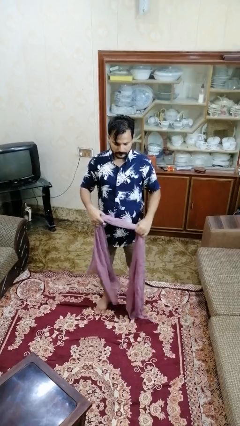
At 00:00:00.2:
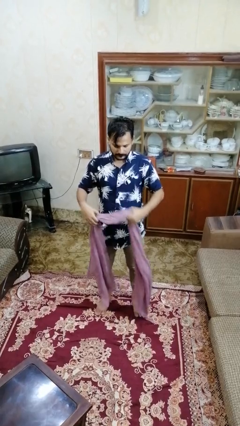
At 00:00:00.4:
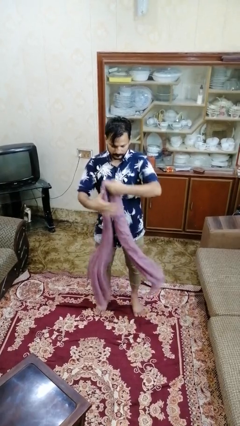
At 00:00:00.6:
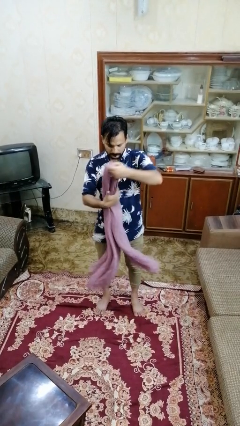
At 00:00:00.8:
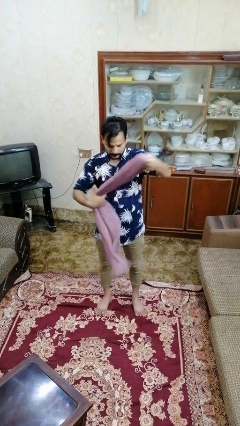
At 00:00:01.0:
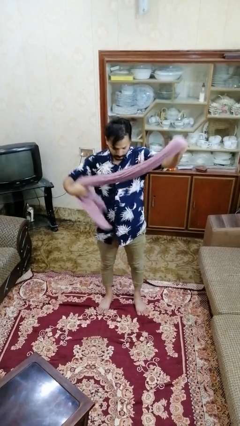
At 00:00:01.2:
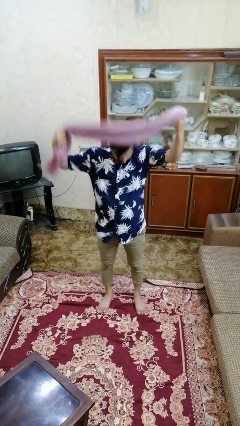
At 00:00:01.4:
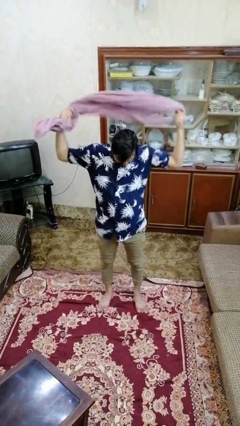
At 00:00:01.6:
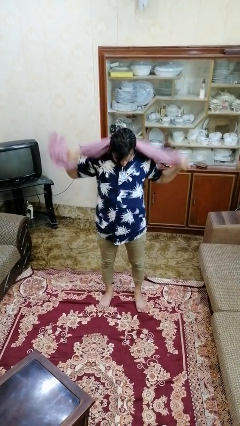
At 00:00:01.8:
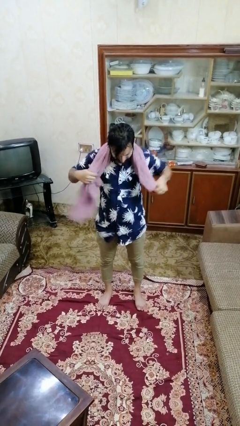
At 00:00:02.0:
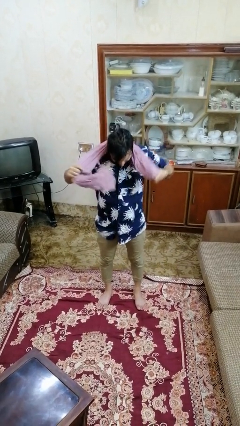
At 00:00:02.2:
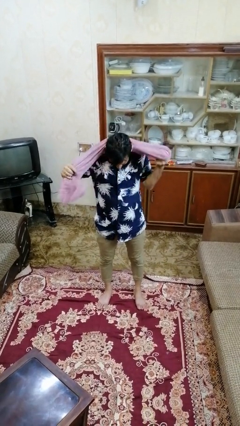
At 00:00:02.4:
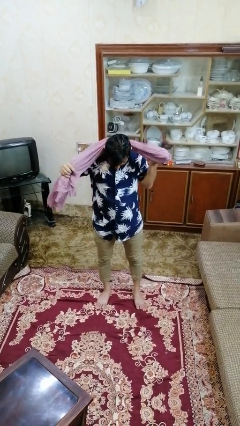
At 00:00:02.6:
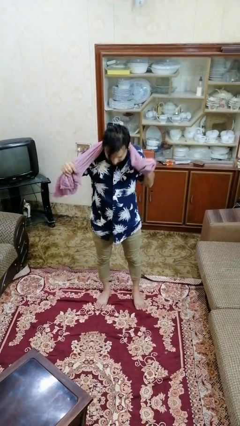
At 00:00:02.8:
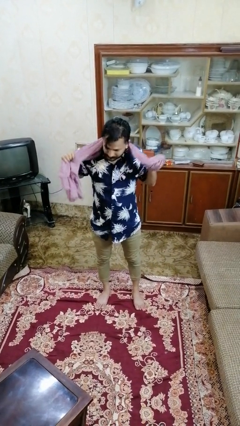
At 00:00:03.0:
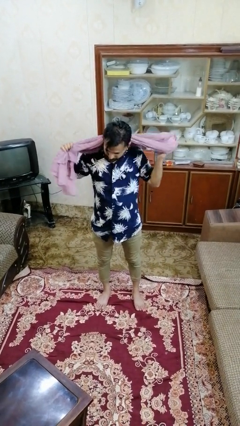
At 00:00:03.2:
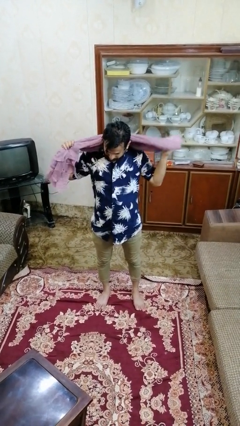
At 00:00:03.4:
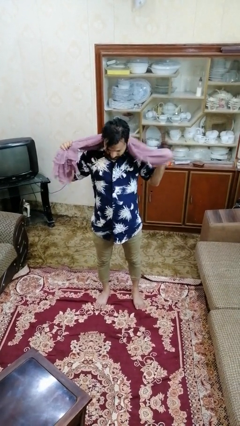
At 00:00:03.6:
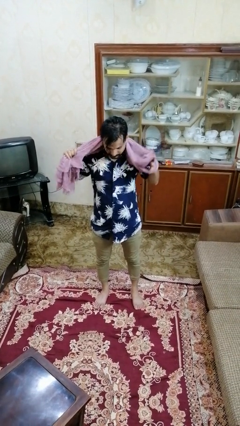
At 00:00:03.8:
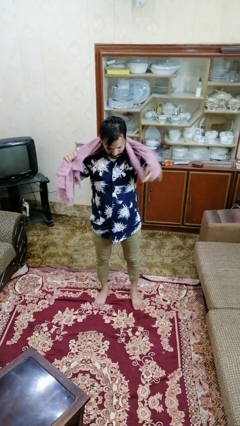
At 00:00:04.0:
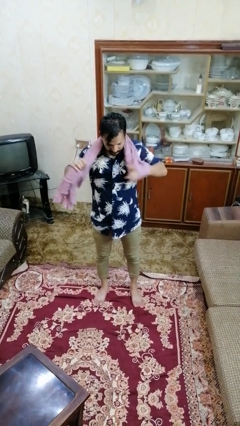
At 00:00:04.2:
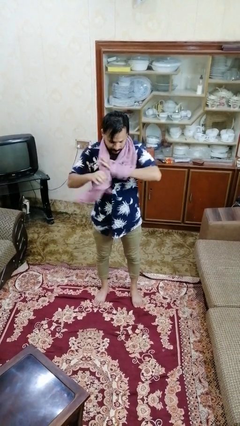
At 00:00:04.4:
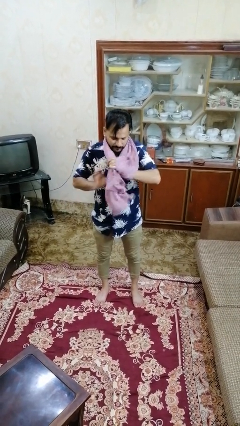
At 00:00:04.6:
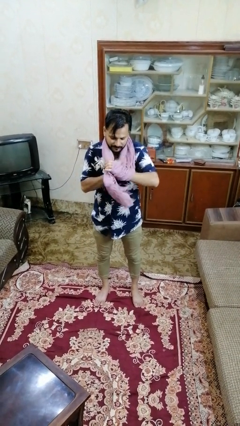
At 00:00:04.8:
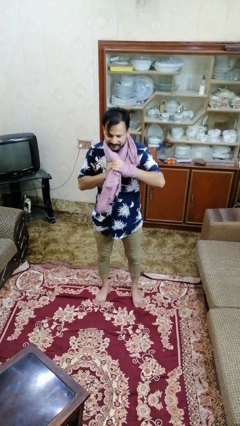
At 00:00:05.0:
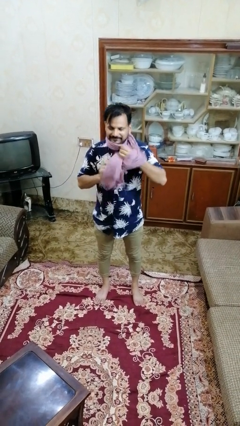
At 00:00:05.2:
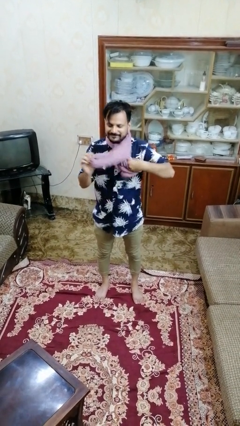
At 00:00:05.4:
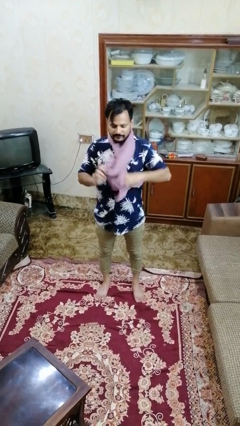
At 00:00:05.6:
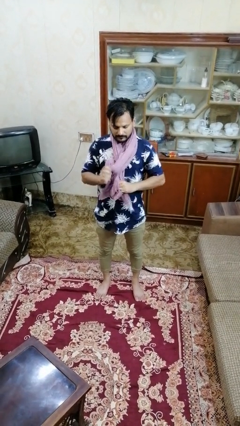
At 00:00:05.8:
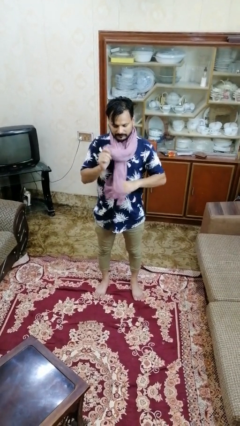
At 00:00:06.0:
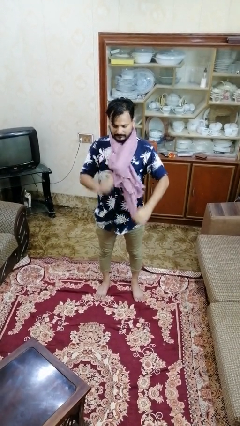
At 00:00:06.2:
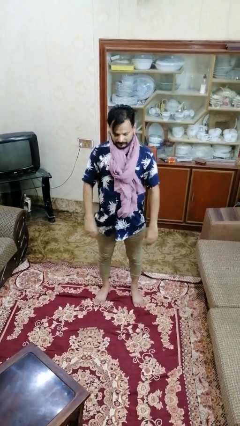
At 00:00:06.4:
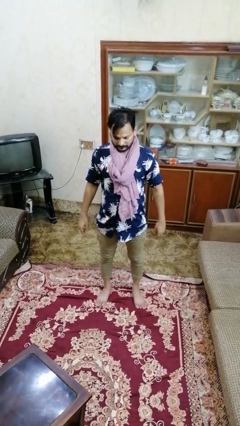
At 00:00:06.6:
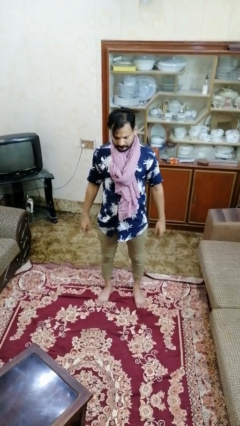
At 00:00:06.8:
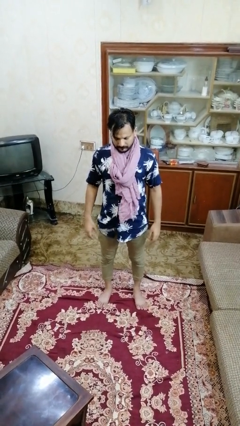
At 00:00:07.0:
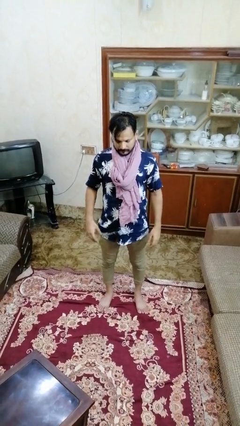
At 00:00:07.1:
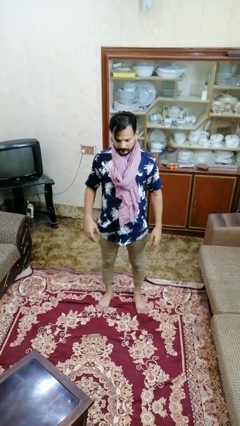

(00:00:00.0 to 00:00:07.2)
person puts on scarf

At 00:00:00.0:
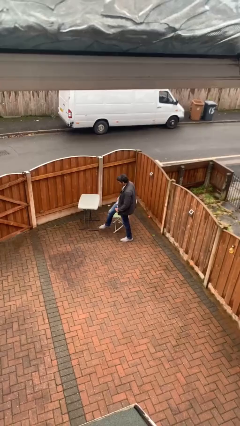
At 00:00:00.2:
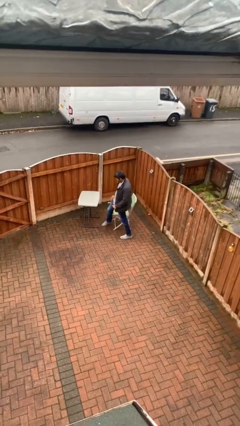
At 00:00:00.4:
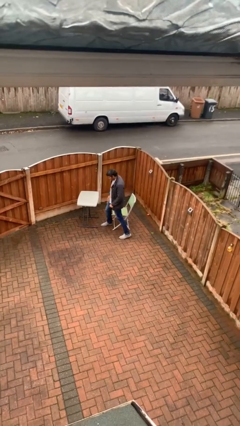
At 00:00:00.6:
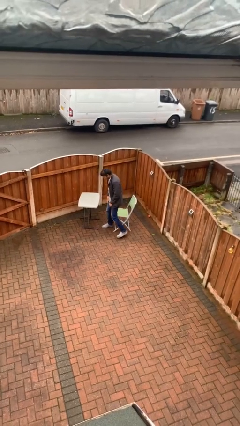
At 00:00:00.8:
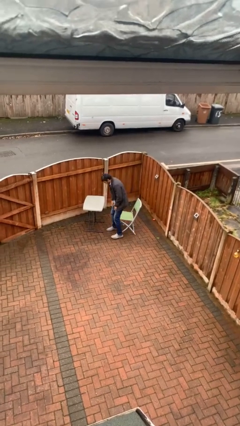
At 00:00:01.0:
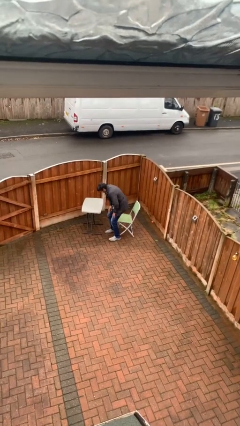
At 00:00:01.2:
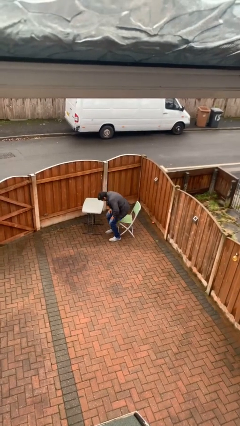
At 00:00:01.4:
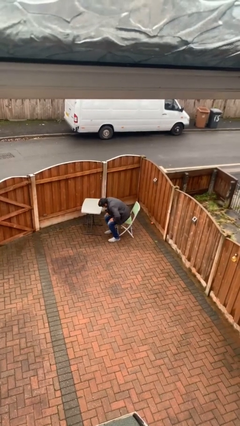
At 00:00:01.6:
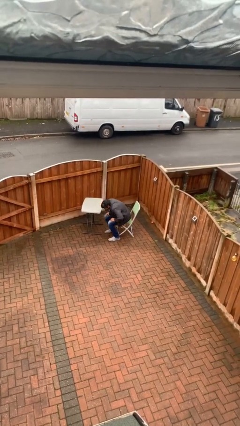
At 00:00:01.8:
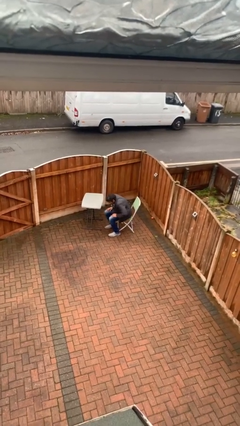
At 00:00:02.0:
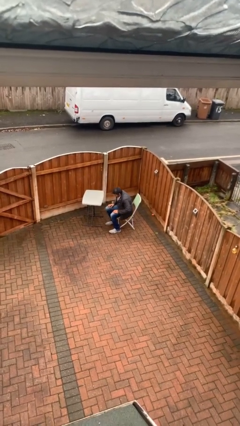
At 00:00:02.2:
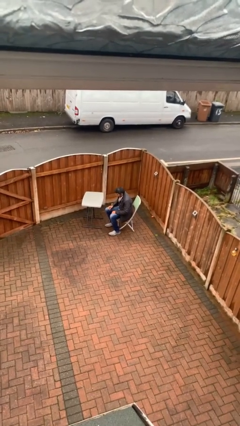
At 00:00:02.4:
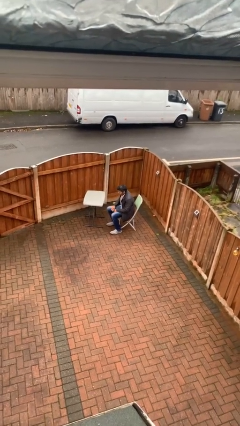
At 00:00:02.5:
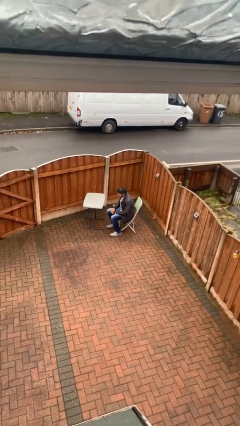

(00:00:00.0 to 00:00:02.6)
person sits down

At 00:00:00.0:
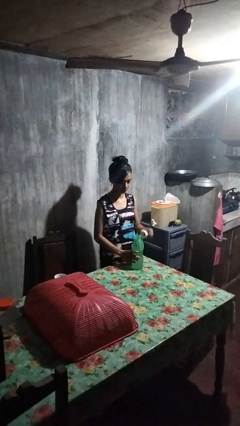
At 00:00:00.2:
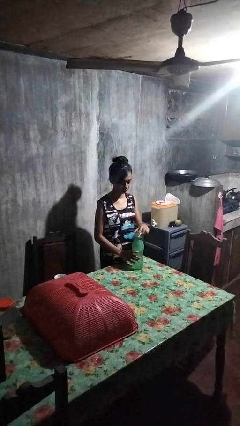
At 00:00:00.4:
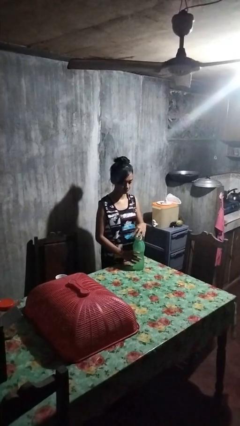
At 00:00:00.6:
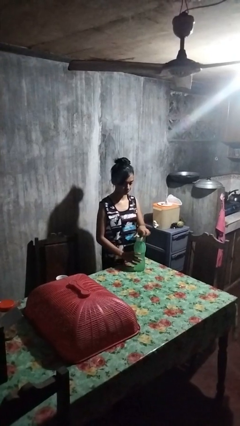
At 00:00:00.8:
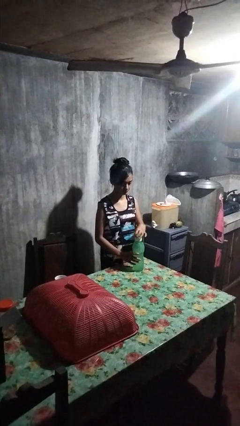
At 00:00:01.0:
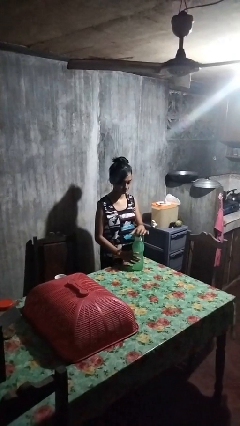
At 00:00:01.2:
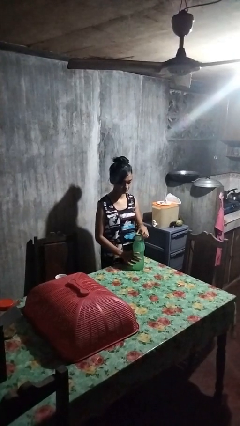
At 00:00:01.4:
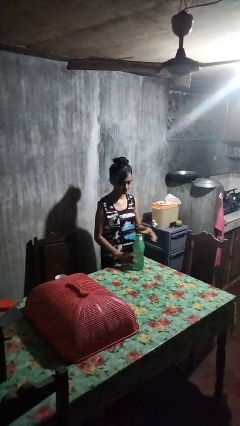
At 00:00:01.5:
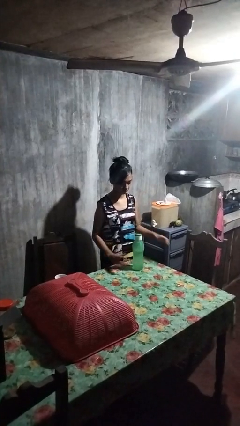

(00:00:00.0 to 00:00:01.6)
person screws lid to bottle

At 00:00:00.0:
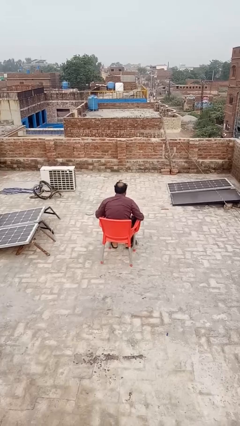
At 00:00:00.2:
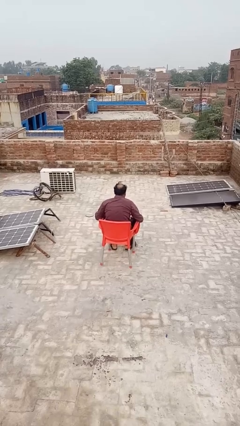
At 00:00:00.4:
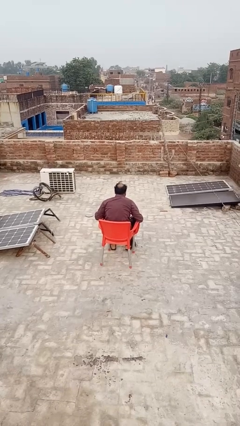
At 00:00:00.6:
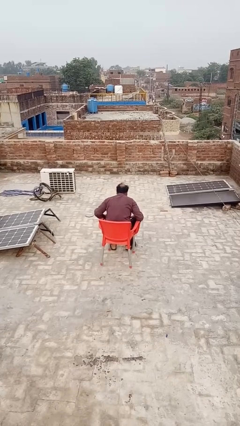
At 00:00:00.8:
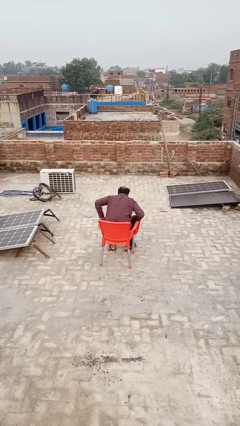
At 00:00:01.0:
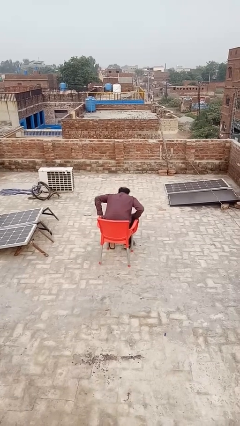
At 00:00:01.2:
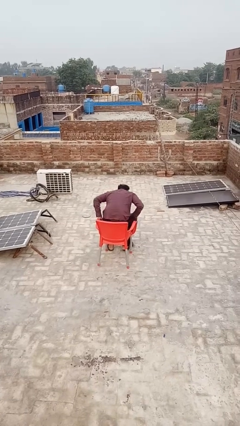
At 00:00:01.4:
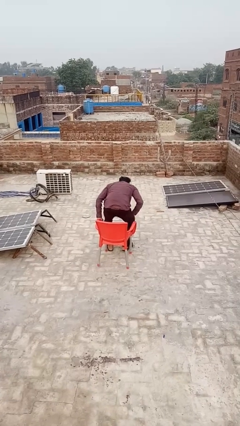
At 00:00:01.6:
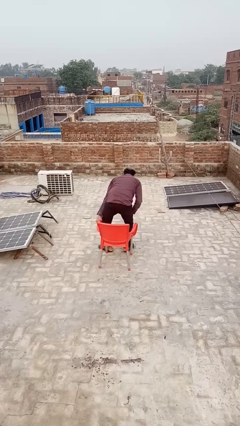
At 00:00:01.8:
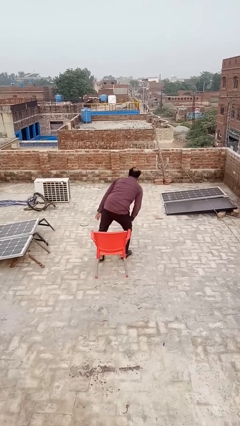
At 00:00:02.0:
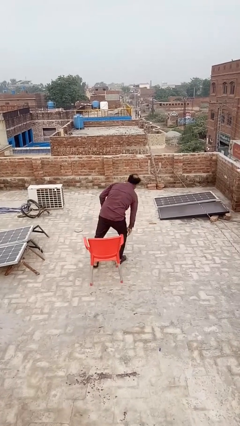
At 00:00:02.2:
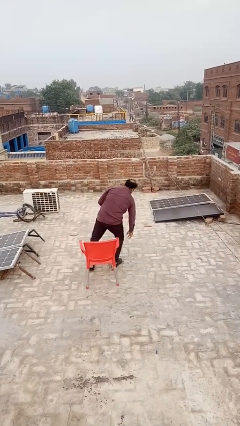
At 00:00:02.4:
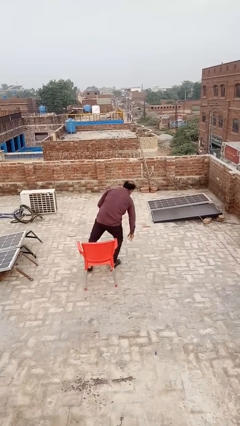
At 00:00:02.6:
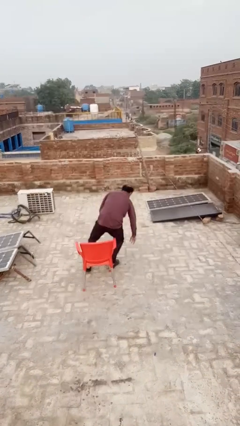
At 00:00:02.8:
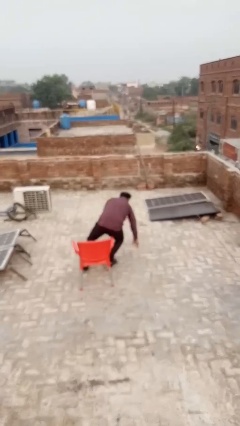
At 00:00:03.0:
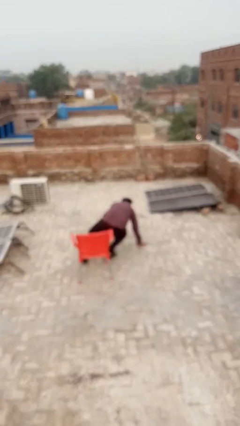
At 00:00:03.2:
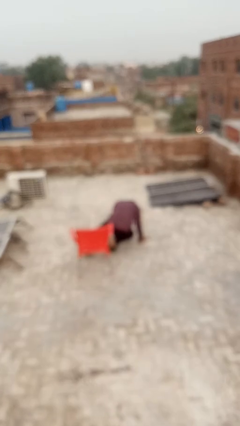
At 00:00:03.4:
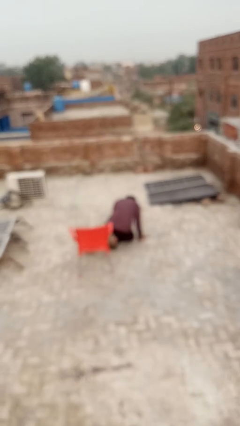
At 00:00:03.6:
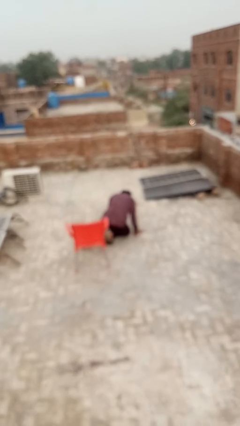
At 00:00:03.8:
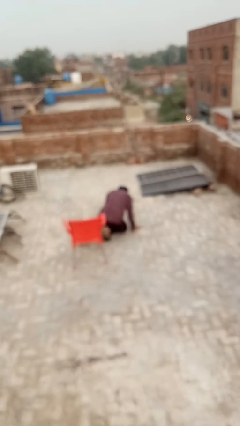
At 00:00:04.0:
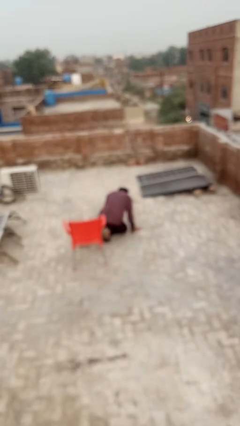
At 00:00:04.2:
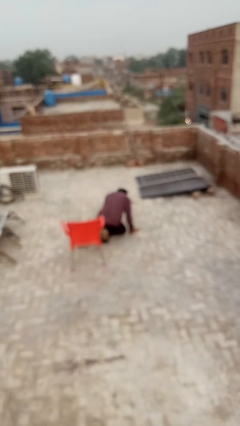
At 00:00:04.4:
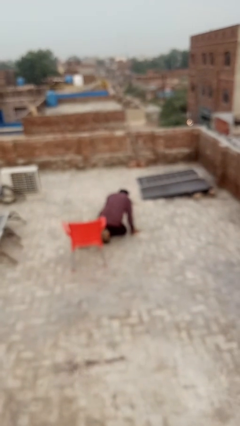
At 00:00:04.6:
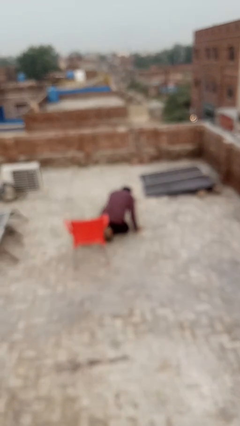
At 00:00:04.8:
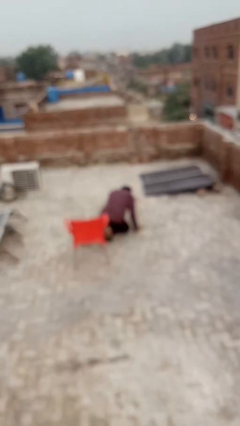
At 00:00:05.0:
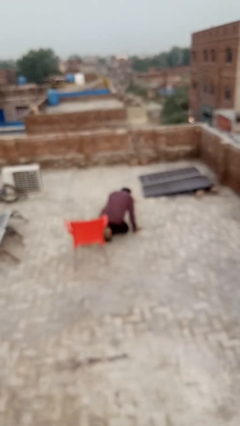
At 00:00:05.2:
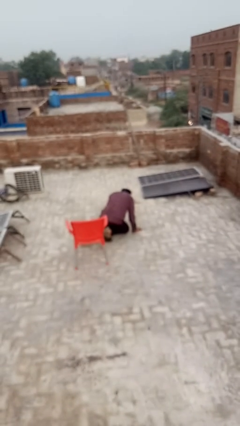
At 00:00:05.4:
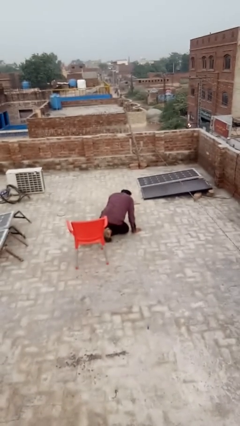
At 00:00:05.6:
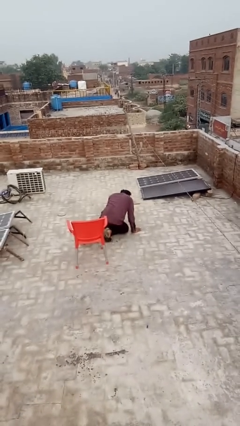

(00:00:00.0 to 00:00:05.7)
person falls from chair

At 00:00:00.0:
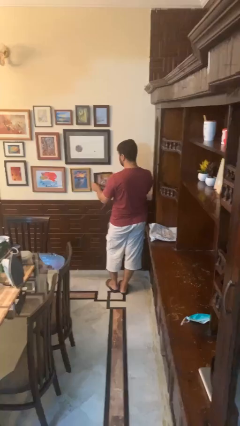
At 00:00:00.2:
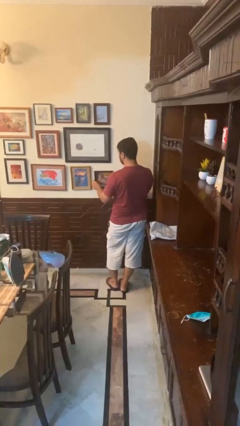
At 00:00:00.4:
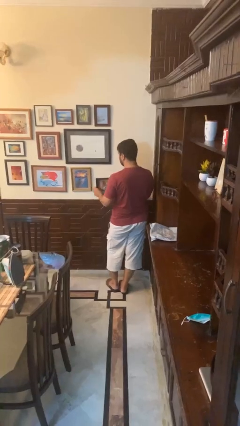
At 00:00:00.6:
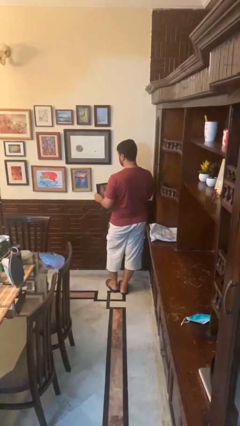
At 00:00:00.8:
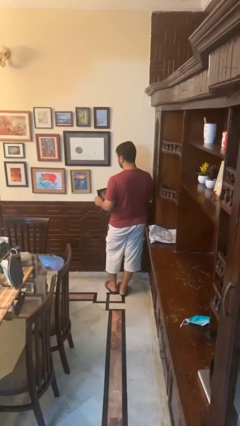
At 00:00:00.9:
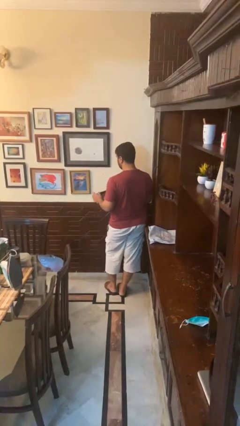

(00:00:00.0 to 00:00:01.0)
person takes down picture frame
